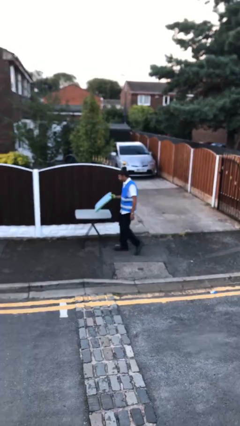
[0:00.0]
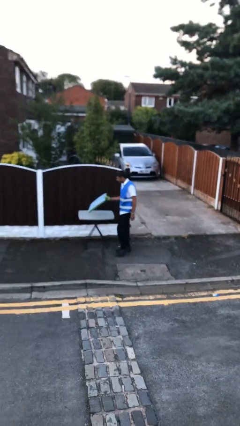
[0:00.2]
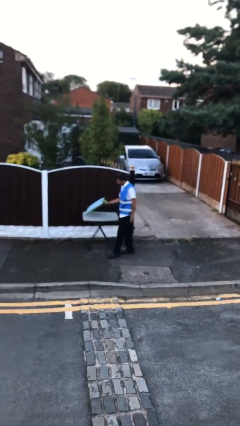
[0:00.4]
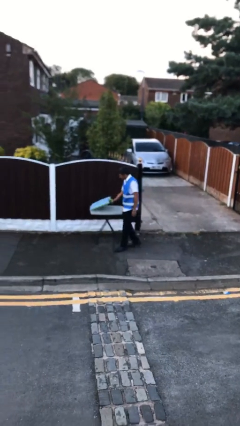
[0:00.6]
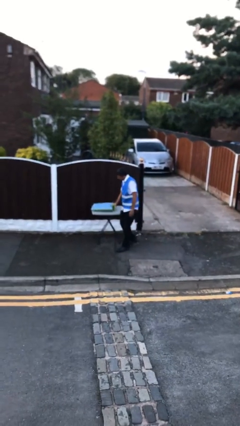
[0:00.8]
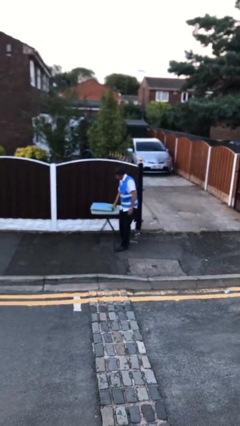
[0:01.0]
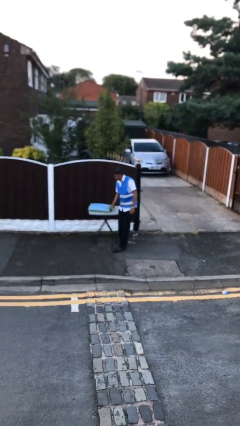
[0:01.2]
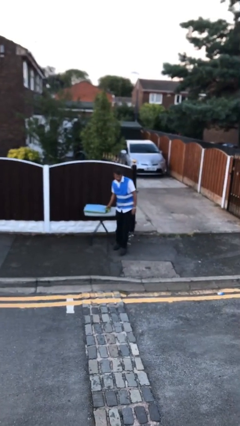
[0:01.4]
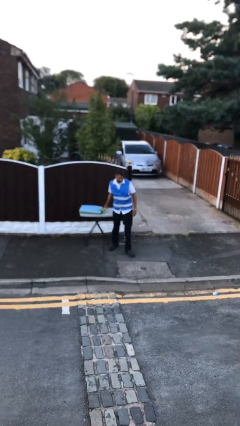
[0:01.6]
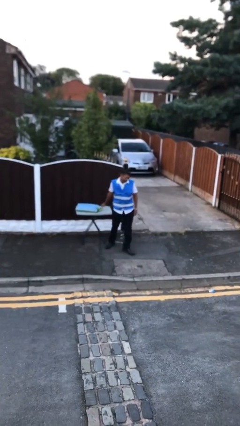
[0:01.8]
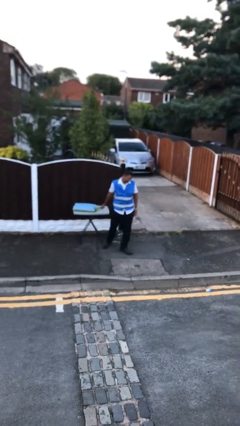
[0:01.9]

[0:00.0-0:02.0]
person puts down object on table

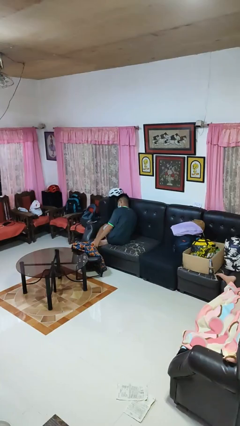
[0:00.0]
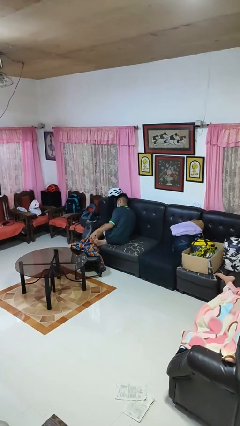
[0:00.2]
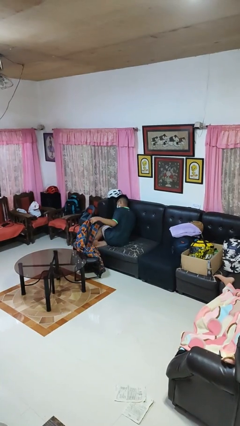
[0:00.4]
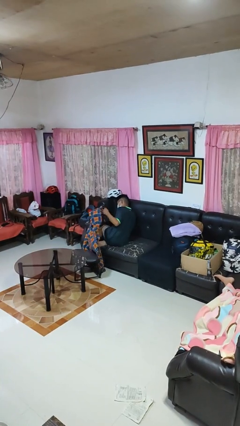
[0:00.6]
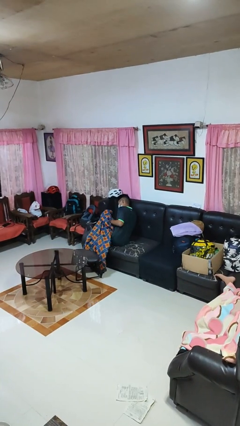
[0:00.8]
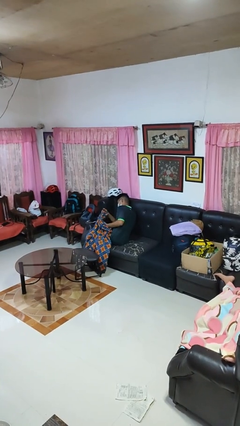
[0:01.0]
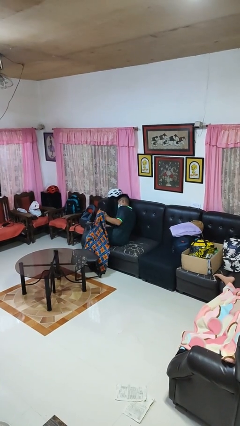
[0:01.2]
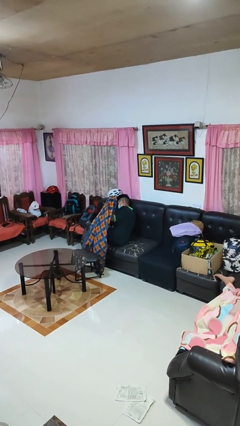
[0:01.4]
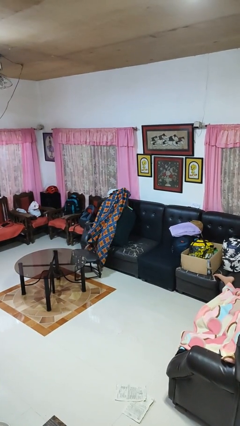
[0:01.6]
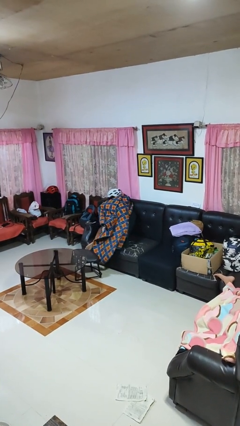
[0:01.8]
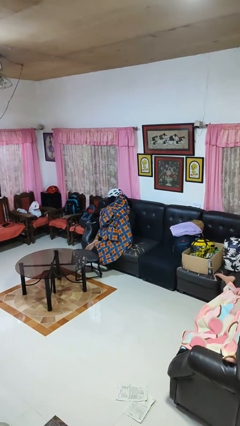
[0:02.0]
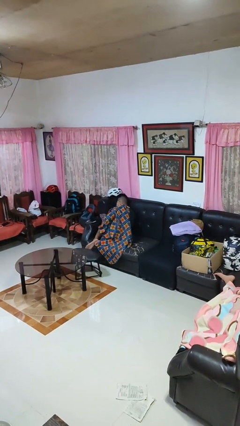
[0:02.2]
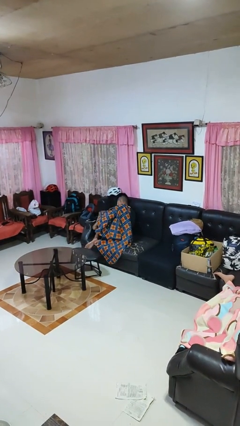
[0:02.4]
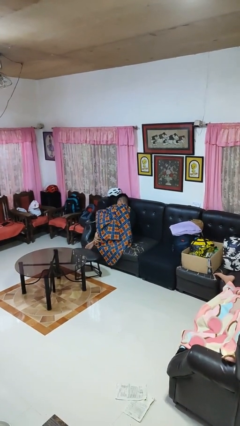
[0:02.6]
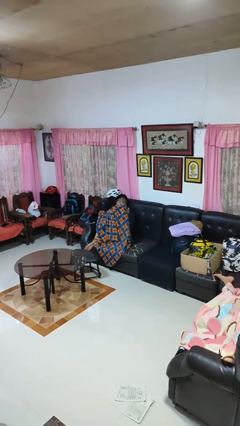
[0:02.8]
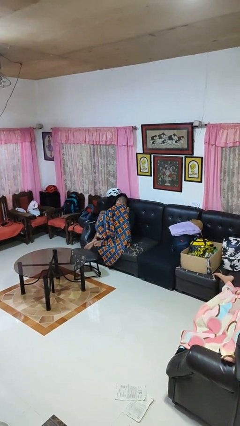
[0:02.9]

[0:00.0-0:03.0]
person covers with blanket

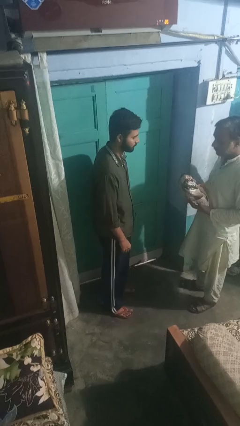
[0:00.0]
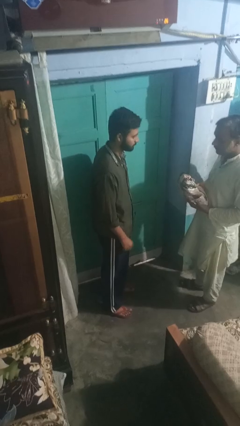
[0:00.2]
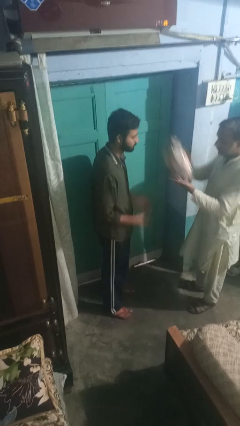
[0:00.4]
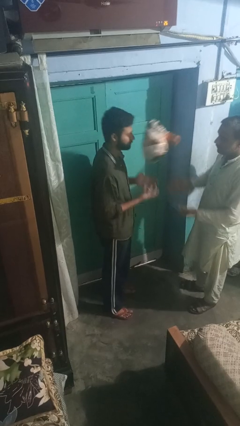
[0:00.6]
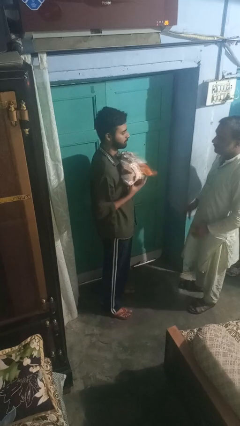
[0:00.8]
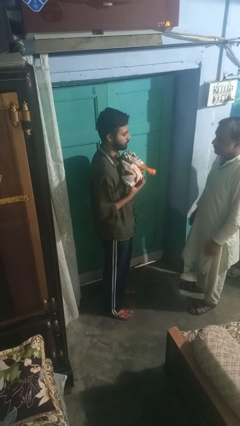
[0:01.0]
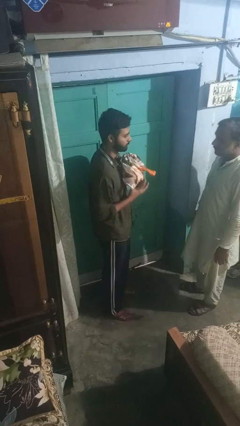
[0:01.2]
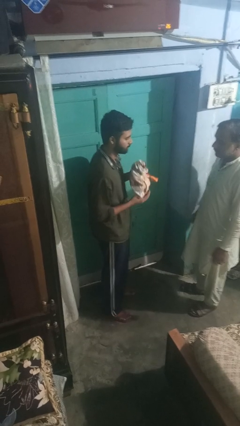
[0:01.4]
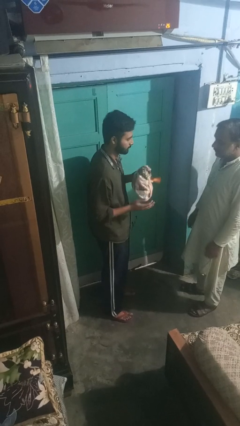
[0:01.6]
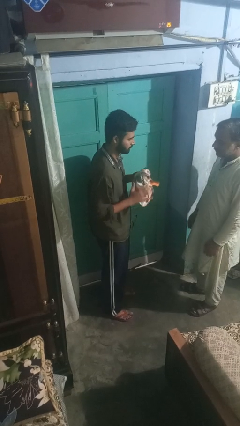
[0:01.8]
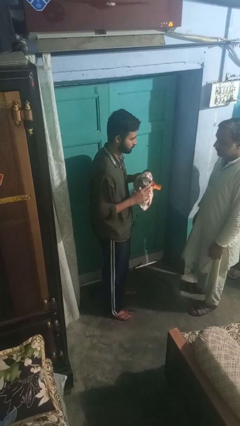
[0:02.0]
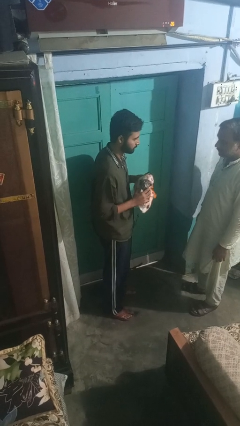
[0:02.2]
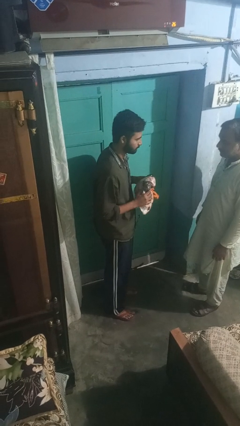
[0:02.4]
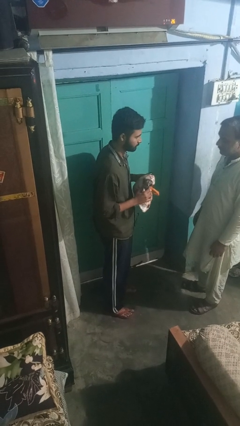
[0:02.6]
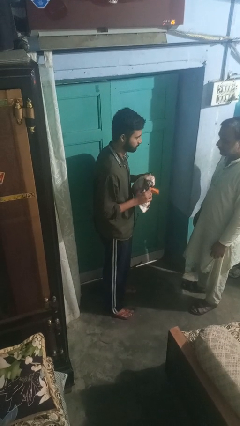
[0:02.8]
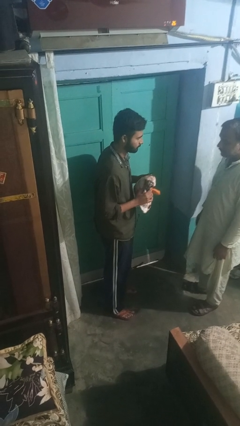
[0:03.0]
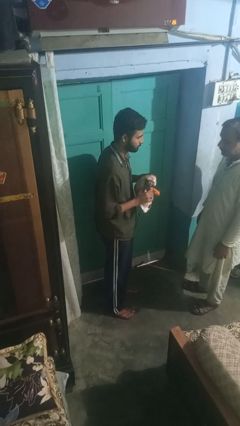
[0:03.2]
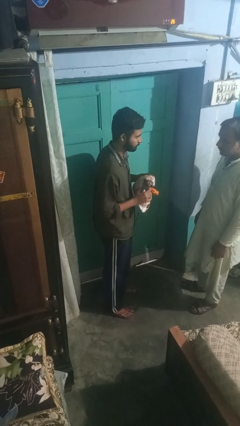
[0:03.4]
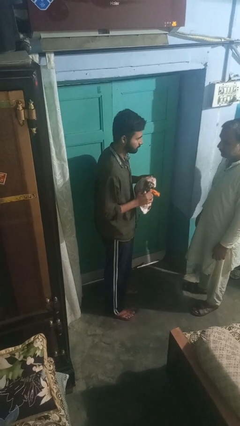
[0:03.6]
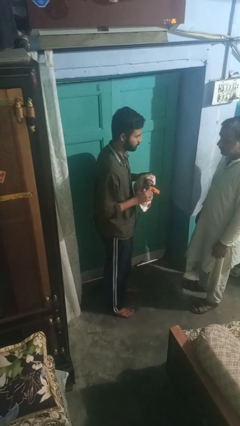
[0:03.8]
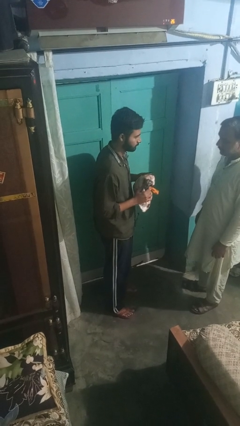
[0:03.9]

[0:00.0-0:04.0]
person catches object from person

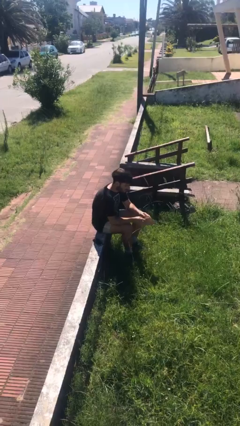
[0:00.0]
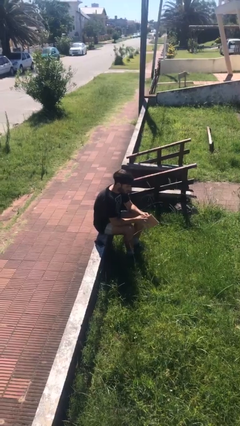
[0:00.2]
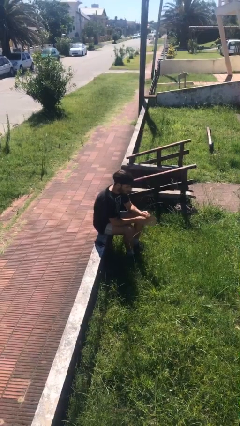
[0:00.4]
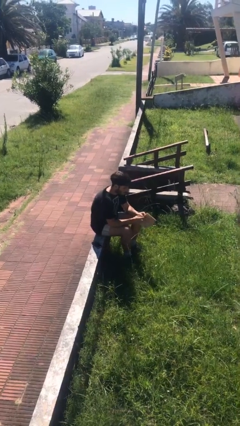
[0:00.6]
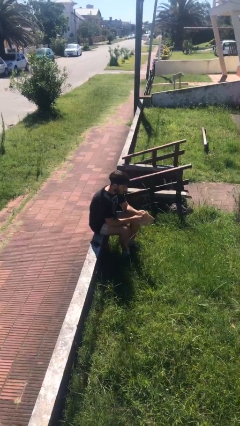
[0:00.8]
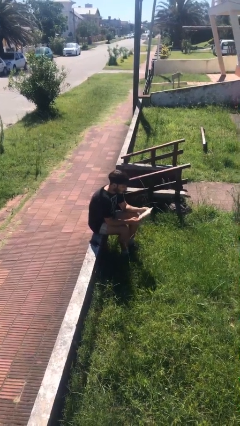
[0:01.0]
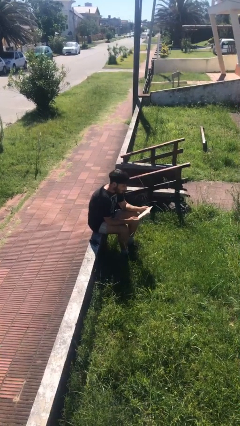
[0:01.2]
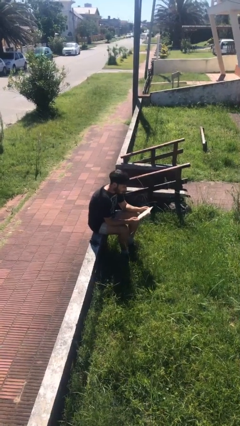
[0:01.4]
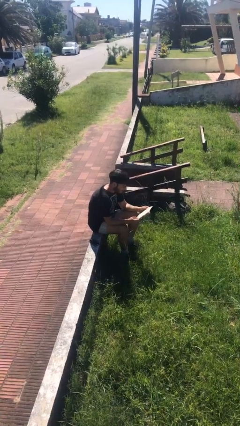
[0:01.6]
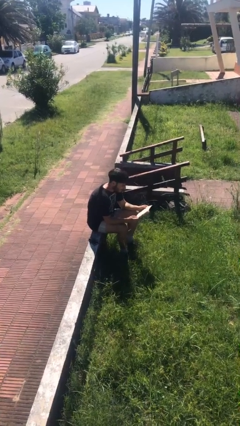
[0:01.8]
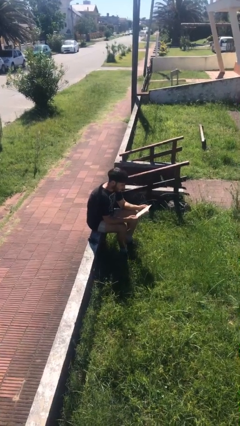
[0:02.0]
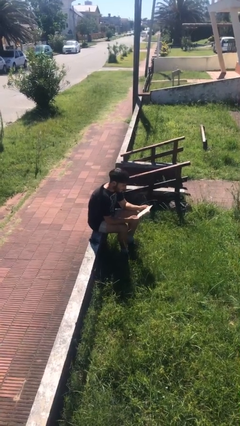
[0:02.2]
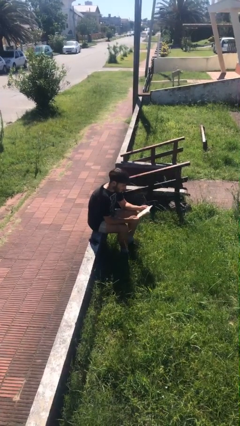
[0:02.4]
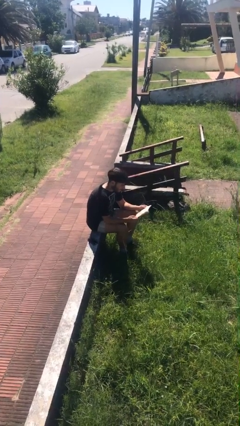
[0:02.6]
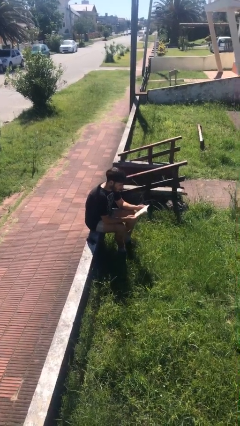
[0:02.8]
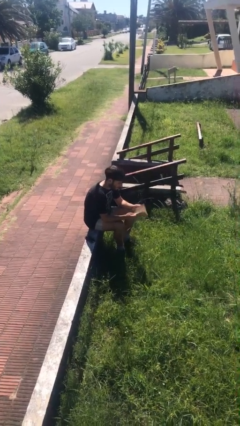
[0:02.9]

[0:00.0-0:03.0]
person reads document

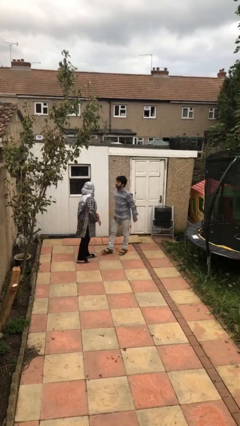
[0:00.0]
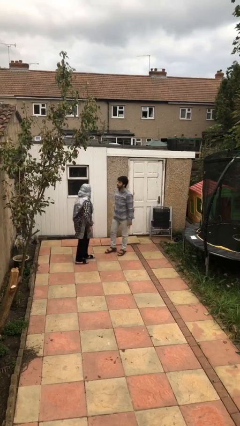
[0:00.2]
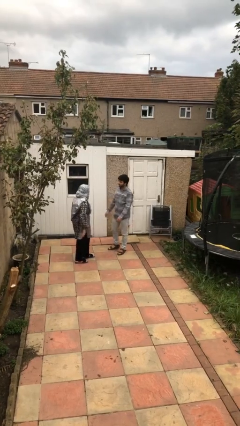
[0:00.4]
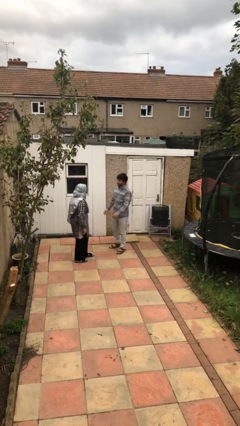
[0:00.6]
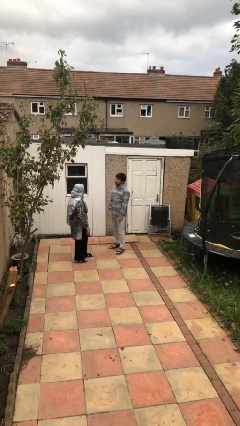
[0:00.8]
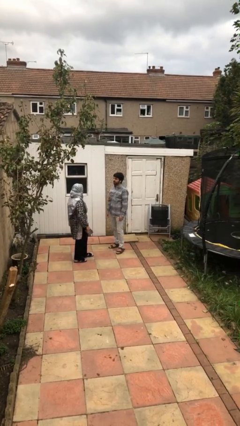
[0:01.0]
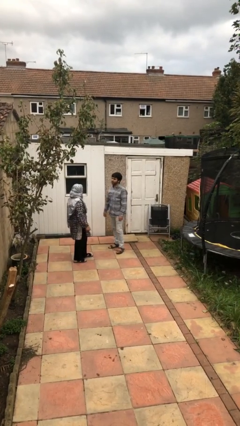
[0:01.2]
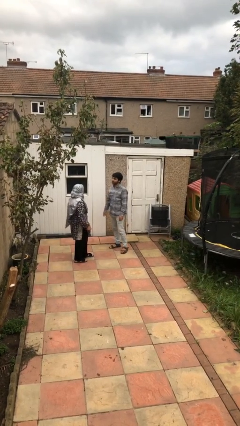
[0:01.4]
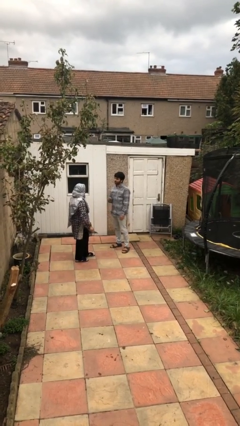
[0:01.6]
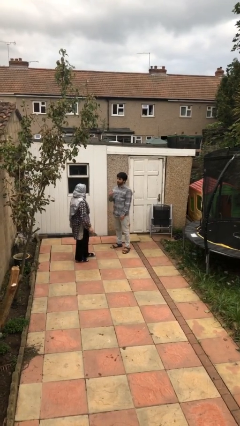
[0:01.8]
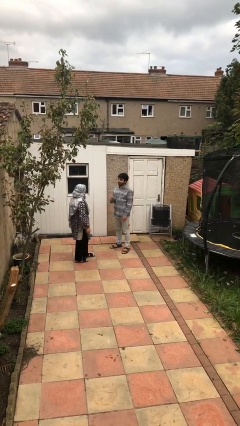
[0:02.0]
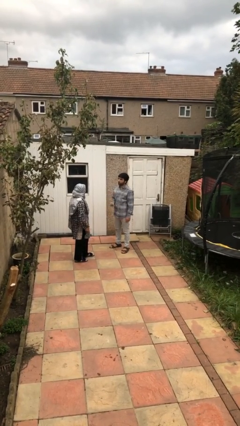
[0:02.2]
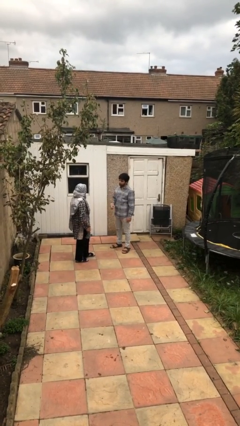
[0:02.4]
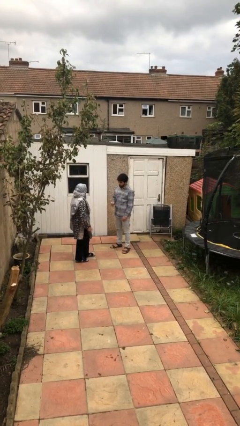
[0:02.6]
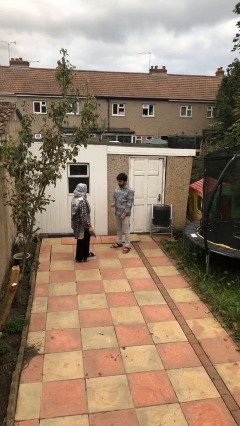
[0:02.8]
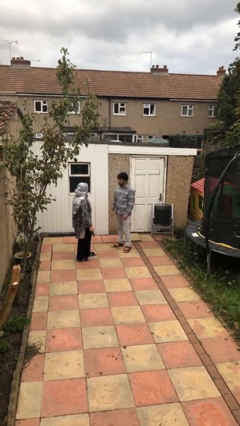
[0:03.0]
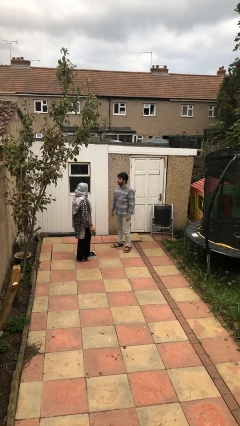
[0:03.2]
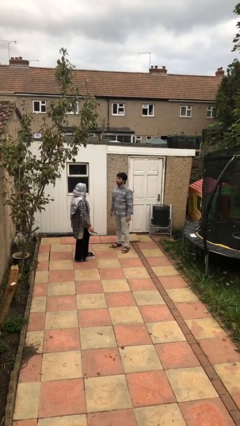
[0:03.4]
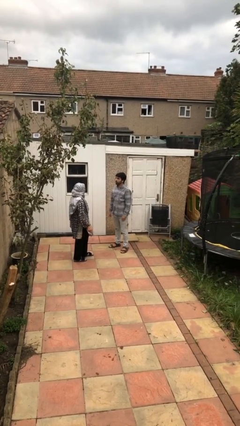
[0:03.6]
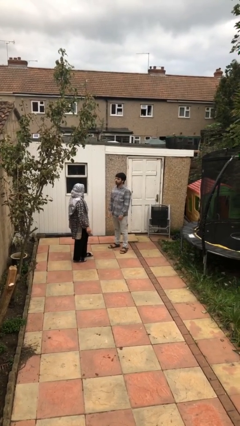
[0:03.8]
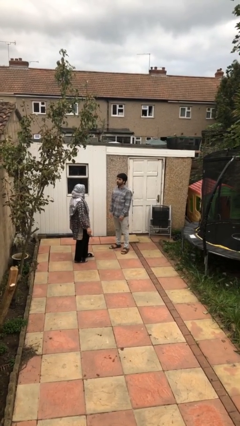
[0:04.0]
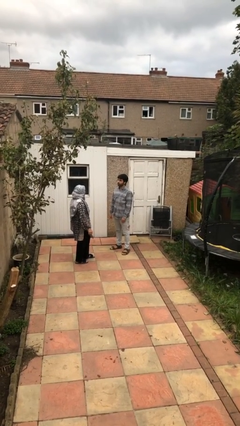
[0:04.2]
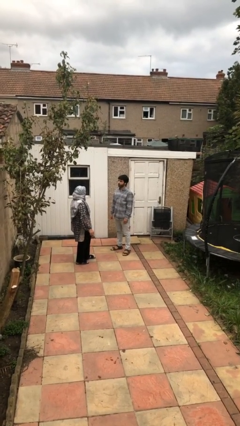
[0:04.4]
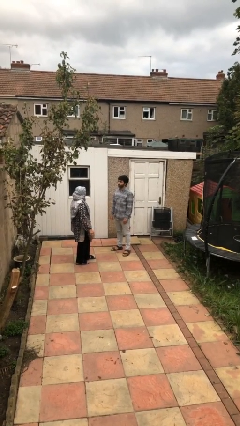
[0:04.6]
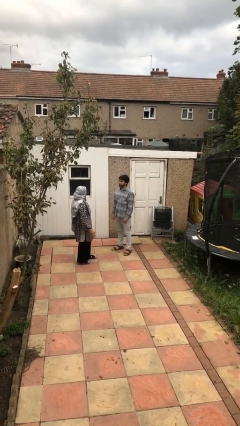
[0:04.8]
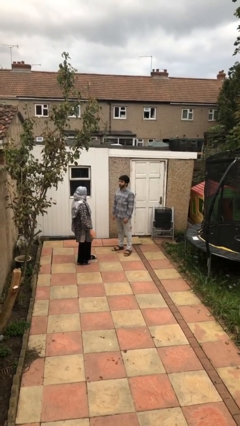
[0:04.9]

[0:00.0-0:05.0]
person talks to person

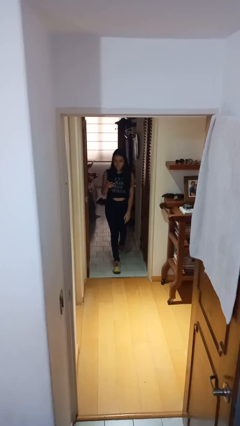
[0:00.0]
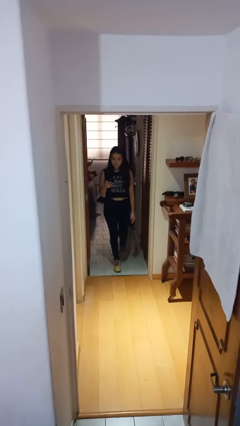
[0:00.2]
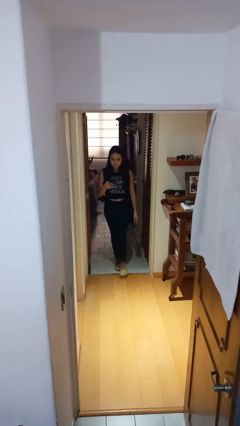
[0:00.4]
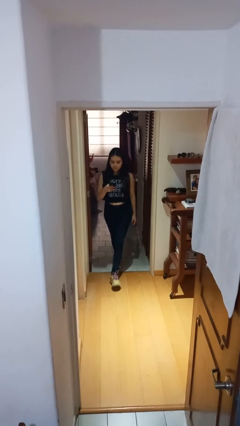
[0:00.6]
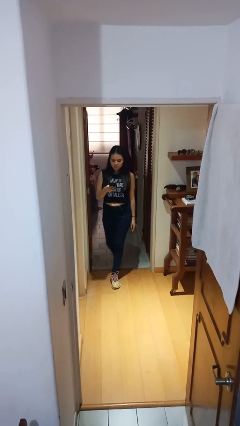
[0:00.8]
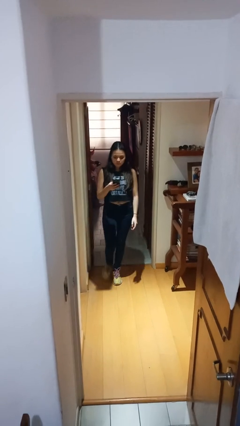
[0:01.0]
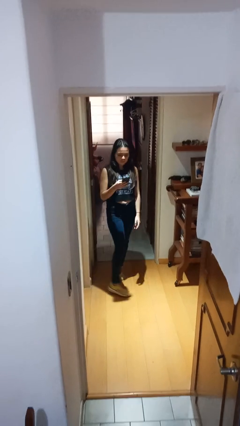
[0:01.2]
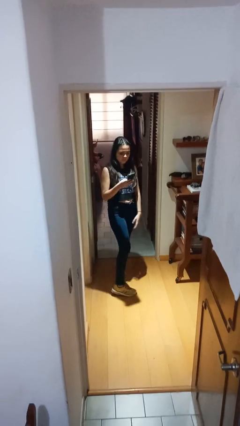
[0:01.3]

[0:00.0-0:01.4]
person enters scene through structure
